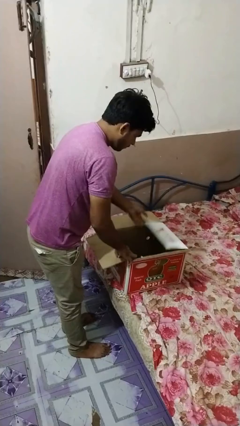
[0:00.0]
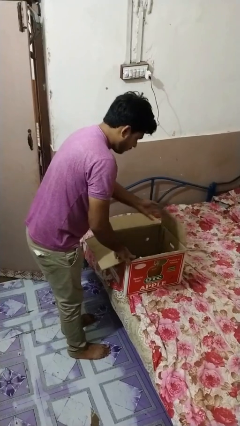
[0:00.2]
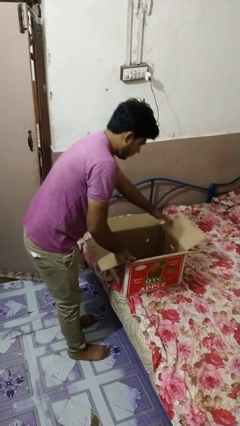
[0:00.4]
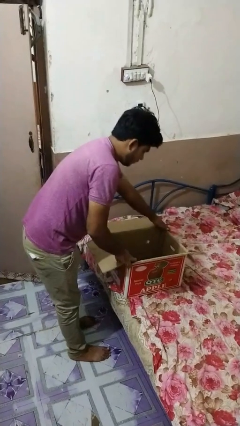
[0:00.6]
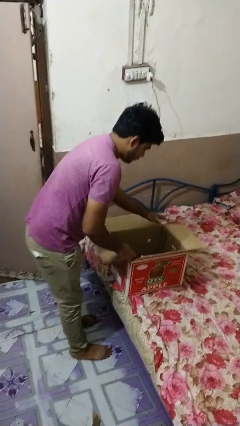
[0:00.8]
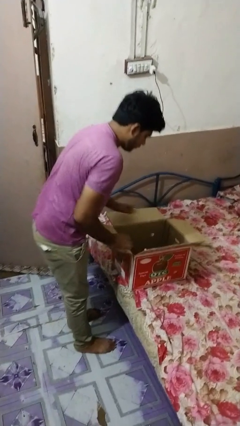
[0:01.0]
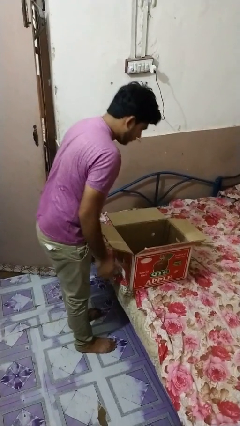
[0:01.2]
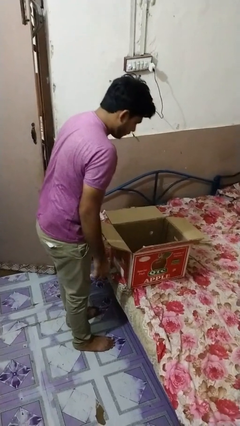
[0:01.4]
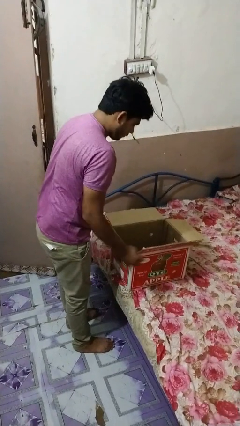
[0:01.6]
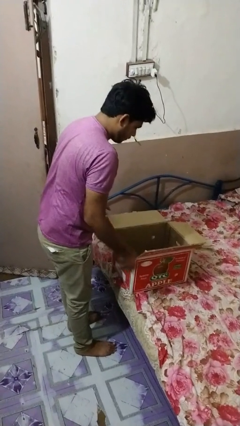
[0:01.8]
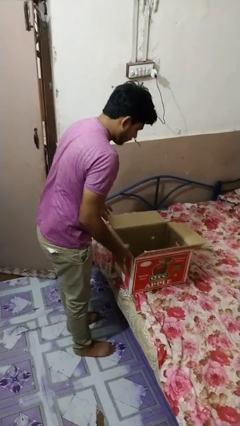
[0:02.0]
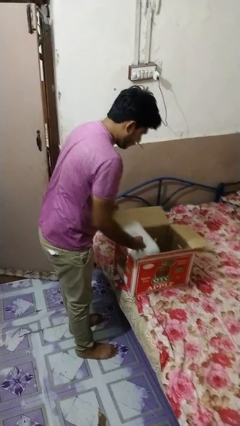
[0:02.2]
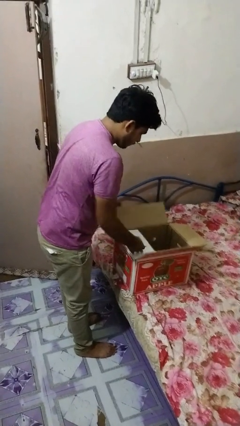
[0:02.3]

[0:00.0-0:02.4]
person opens box

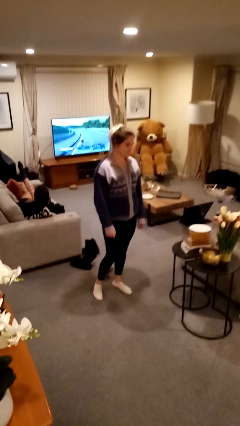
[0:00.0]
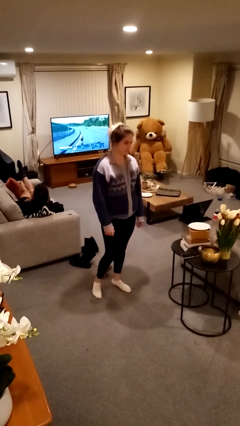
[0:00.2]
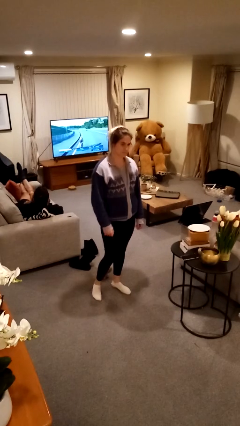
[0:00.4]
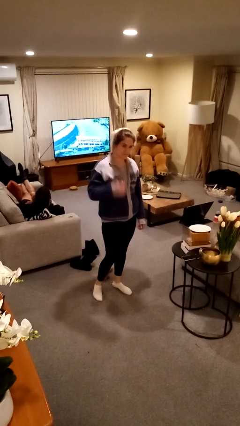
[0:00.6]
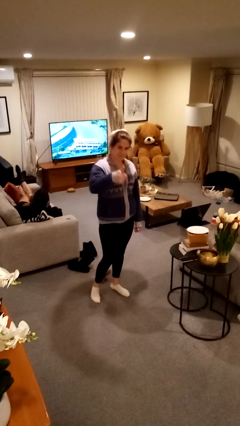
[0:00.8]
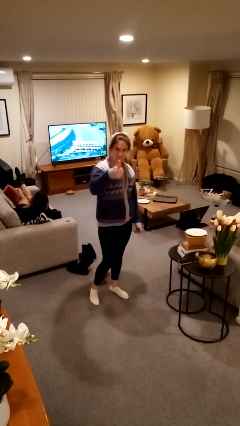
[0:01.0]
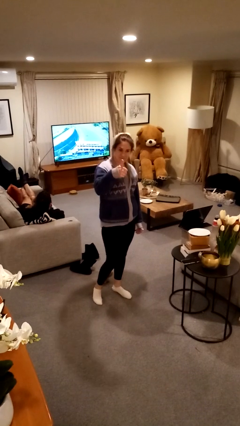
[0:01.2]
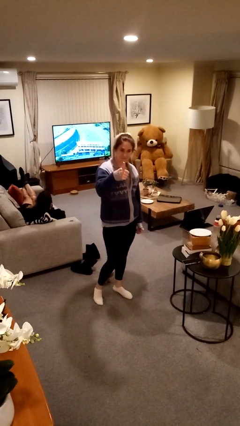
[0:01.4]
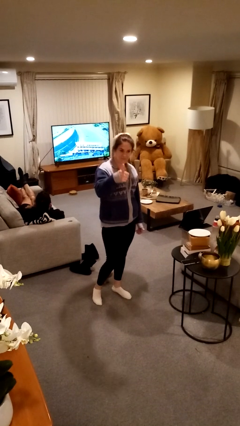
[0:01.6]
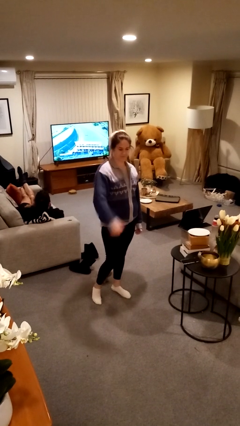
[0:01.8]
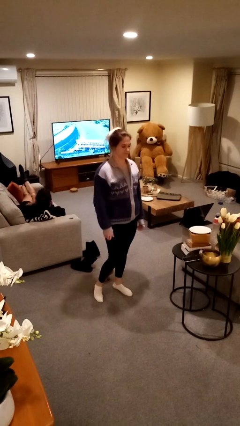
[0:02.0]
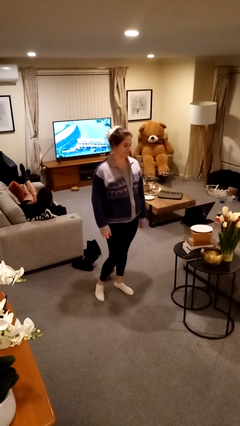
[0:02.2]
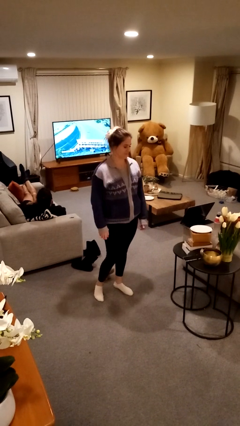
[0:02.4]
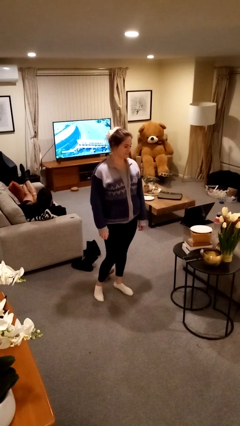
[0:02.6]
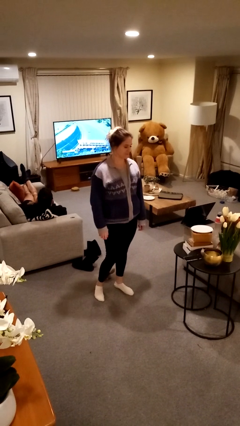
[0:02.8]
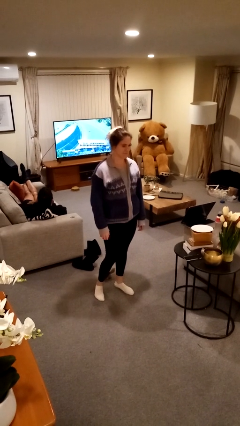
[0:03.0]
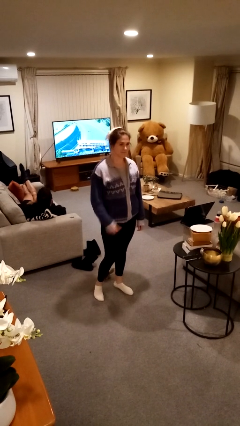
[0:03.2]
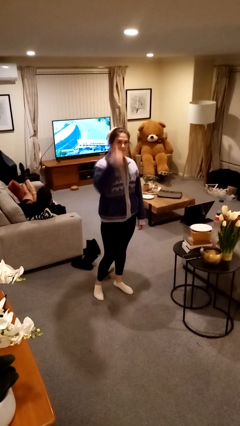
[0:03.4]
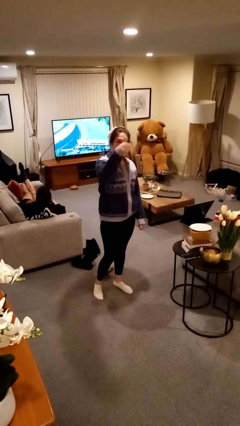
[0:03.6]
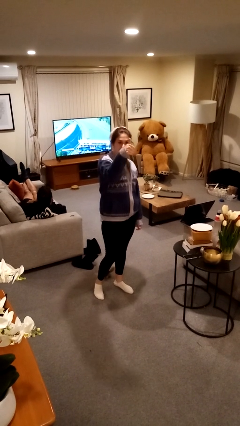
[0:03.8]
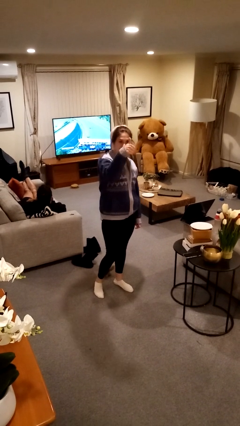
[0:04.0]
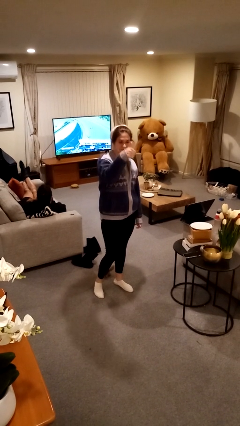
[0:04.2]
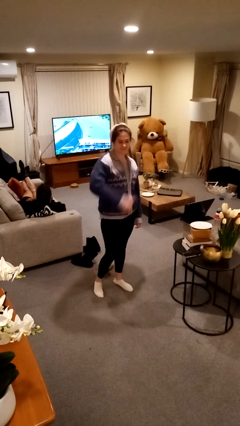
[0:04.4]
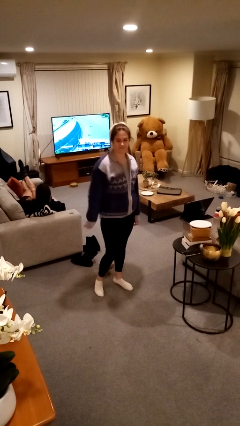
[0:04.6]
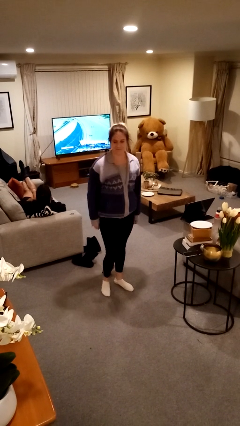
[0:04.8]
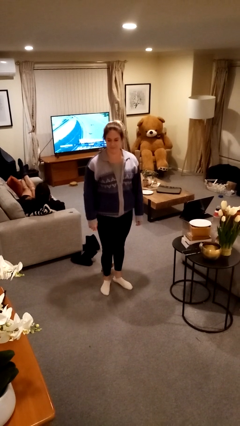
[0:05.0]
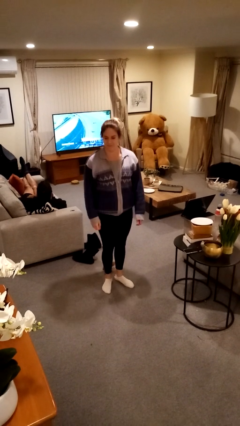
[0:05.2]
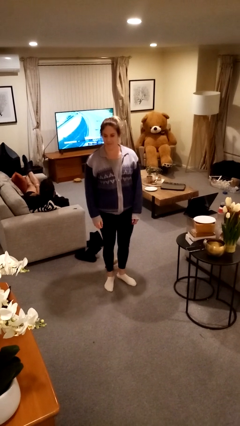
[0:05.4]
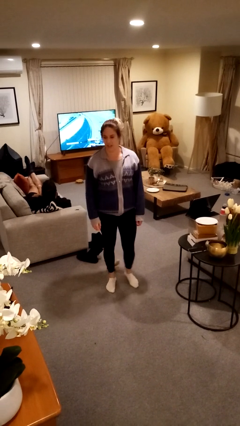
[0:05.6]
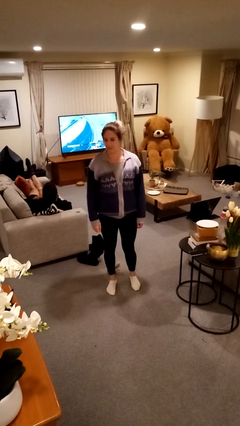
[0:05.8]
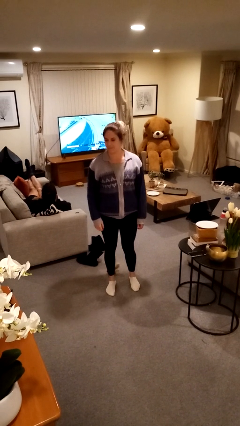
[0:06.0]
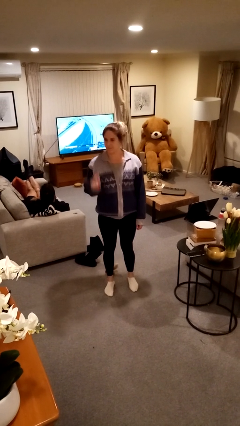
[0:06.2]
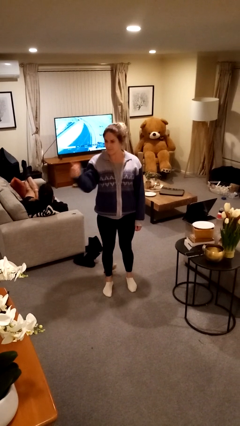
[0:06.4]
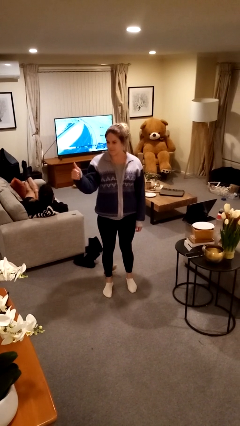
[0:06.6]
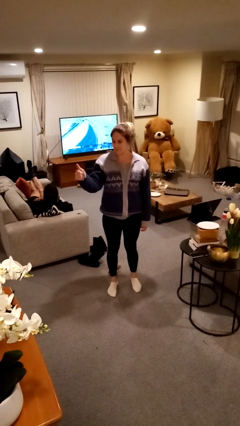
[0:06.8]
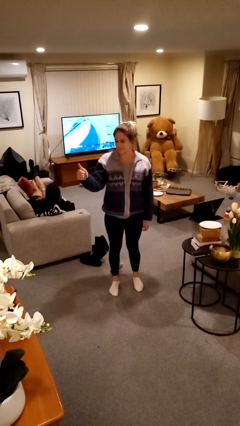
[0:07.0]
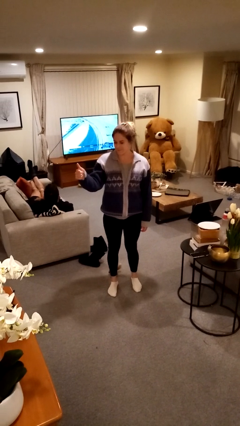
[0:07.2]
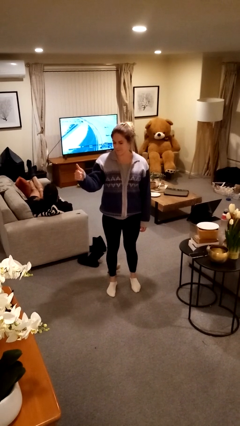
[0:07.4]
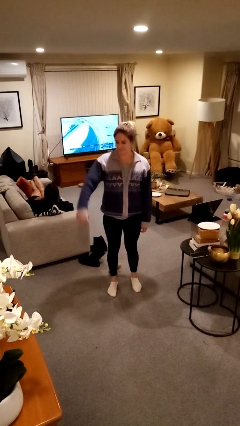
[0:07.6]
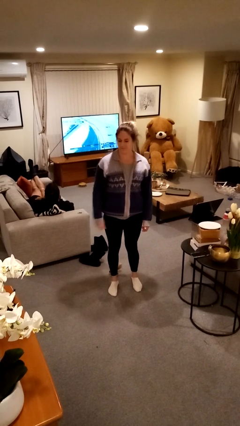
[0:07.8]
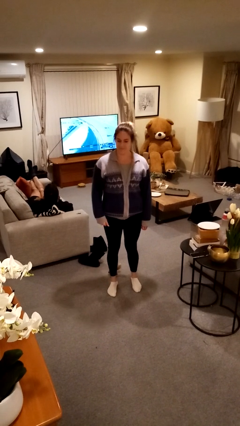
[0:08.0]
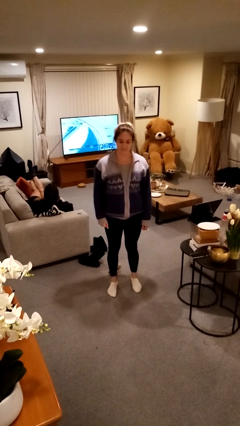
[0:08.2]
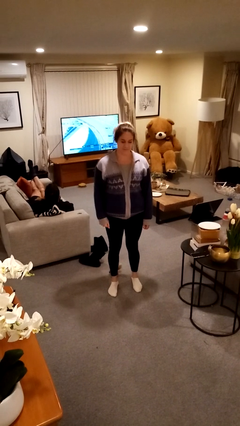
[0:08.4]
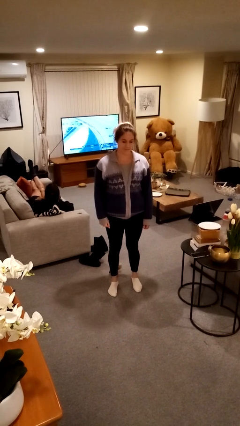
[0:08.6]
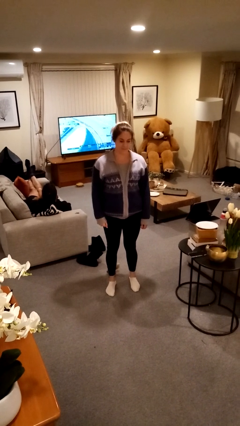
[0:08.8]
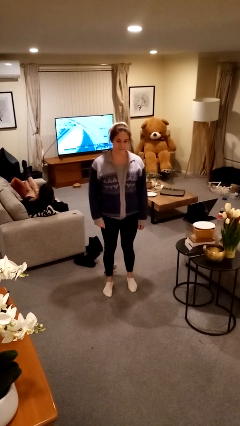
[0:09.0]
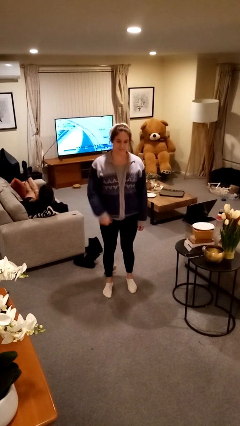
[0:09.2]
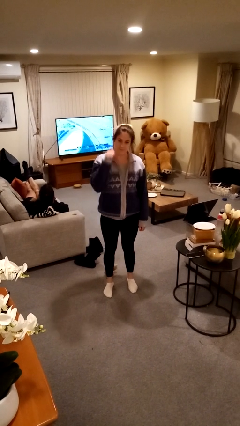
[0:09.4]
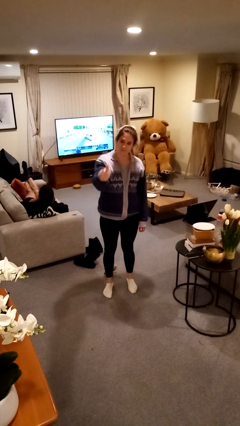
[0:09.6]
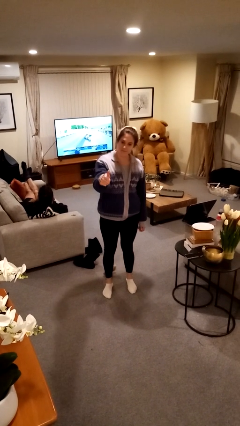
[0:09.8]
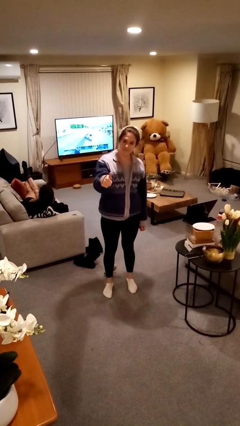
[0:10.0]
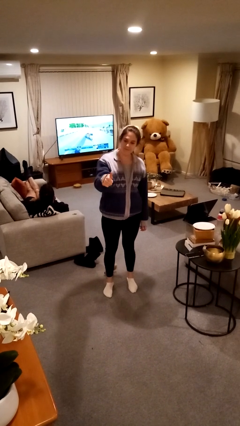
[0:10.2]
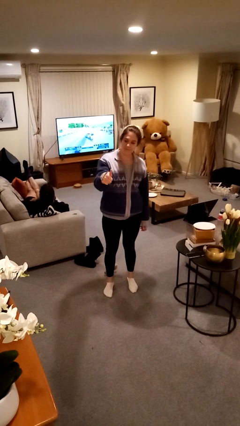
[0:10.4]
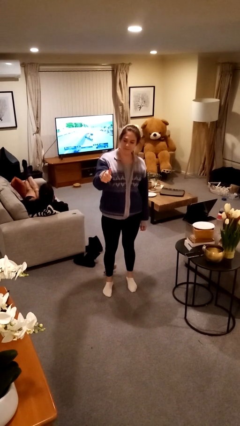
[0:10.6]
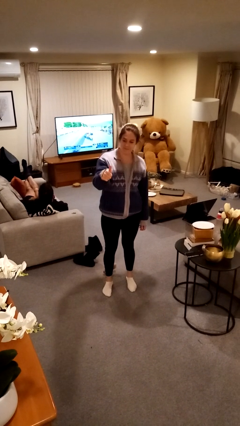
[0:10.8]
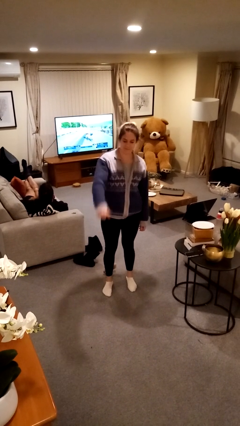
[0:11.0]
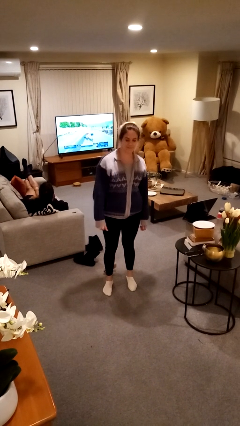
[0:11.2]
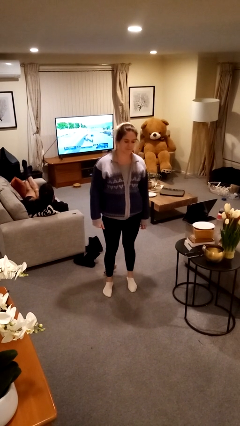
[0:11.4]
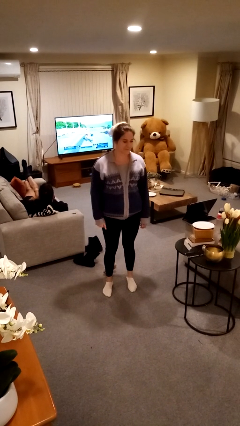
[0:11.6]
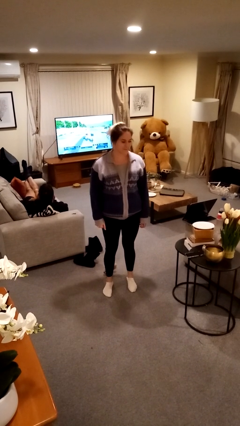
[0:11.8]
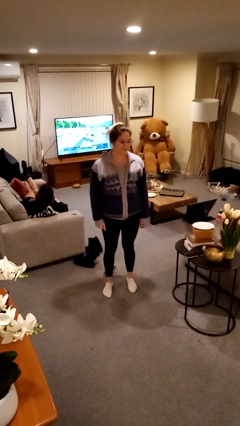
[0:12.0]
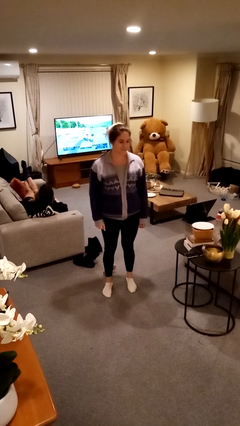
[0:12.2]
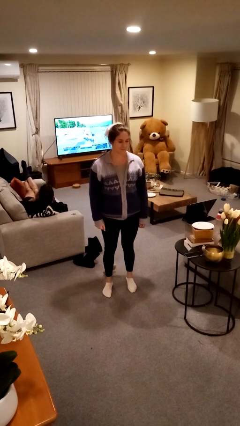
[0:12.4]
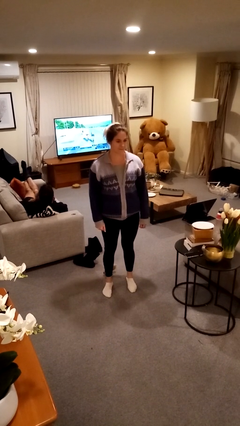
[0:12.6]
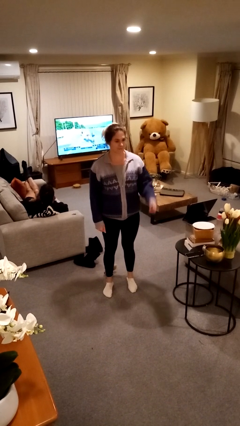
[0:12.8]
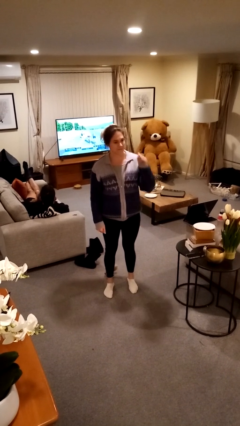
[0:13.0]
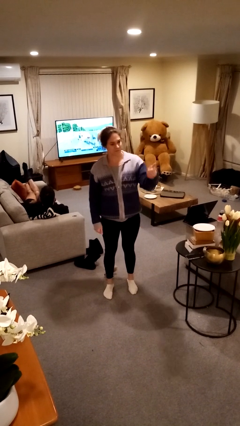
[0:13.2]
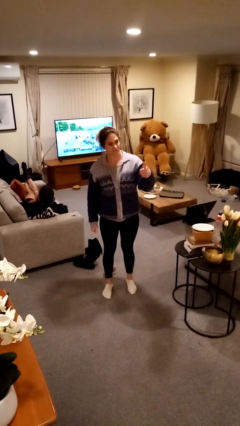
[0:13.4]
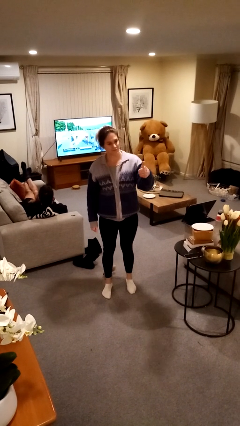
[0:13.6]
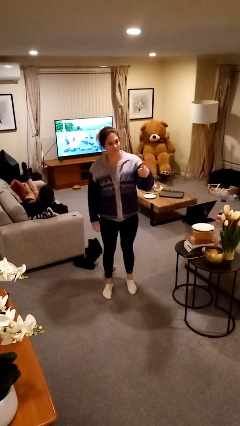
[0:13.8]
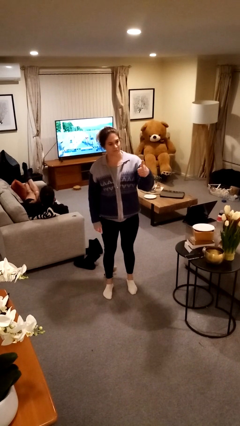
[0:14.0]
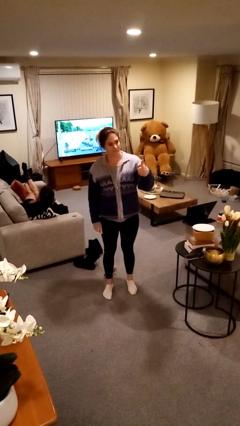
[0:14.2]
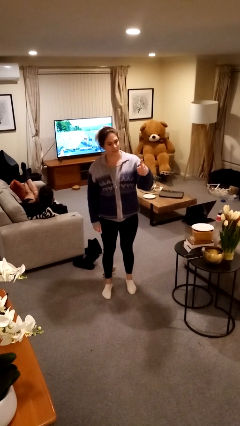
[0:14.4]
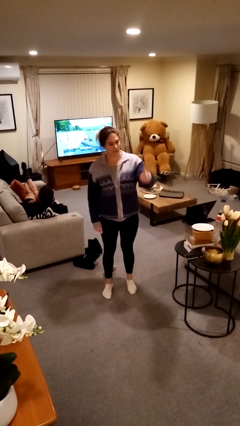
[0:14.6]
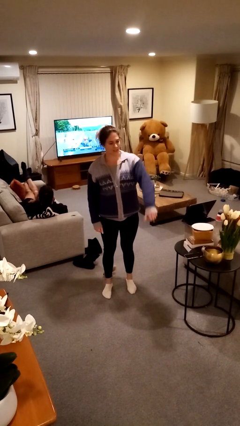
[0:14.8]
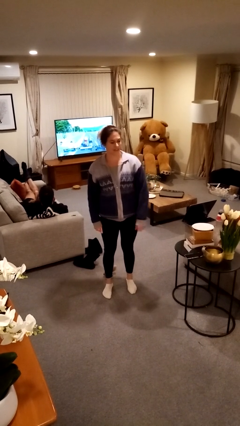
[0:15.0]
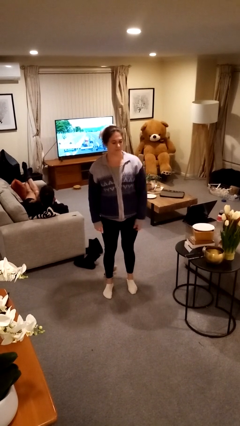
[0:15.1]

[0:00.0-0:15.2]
person gestures thumbs up

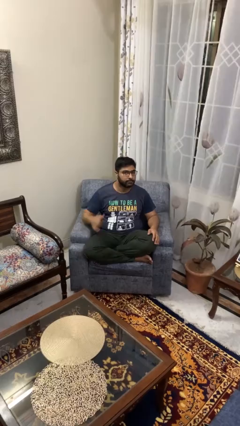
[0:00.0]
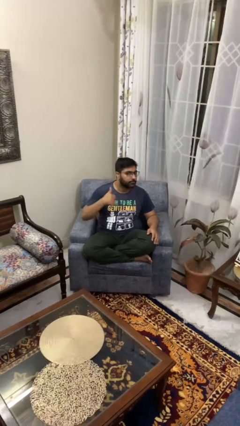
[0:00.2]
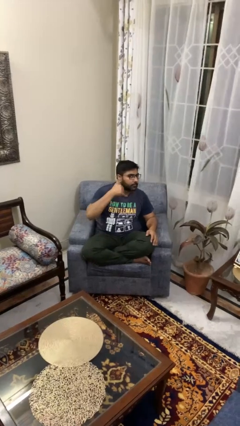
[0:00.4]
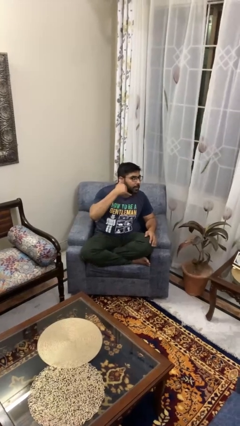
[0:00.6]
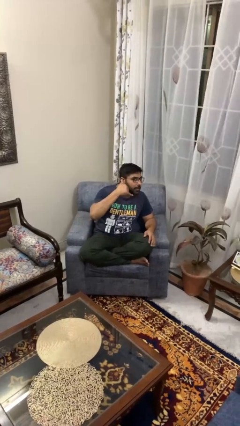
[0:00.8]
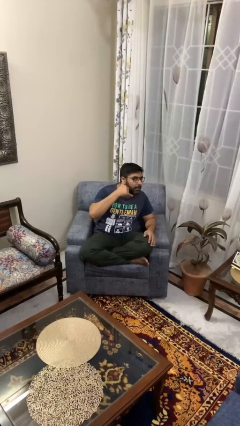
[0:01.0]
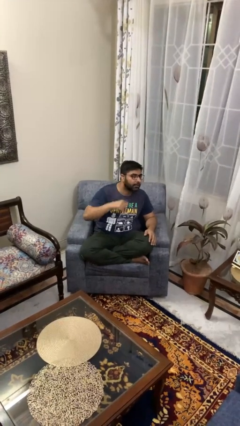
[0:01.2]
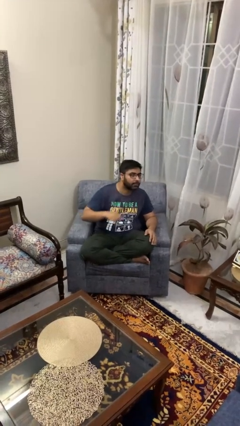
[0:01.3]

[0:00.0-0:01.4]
person gestures call me
